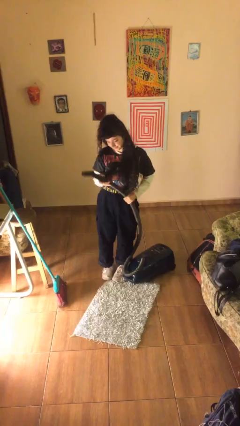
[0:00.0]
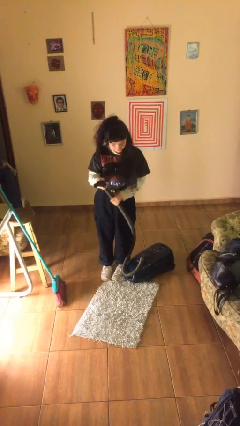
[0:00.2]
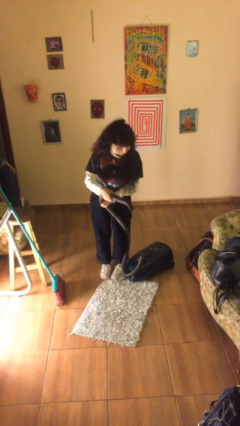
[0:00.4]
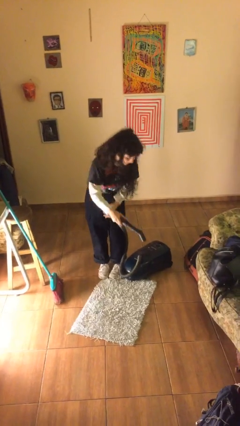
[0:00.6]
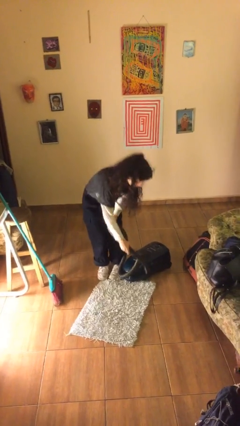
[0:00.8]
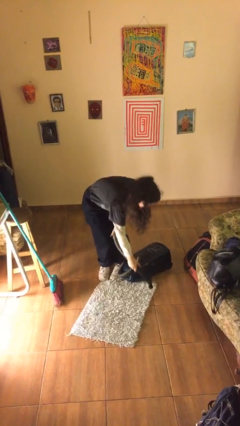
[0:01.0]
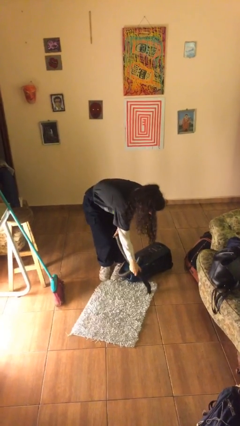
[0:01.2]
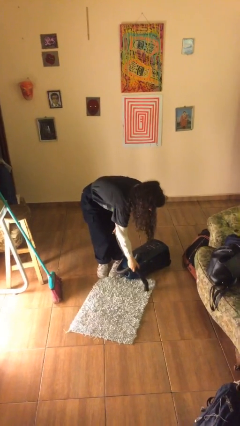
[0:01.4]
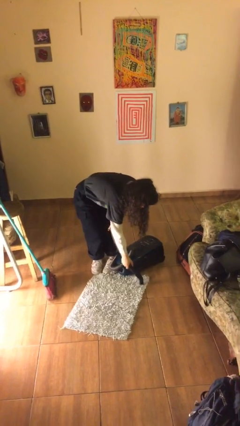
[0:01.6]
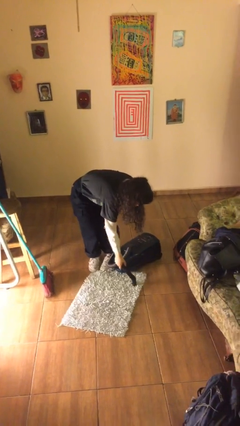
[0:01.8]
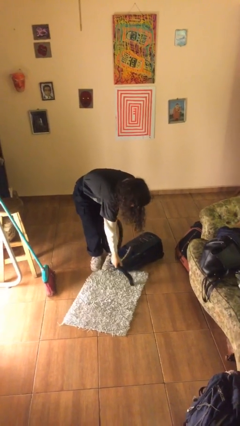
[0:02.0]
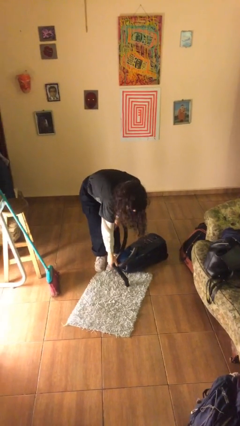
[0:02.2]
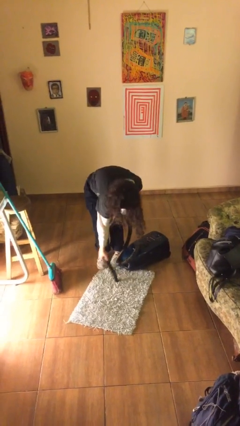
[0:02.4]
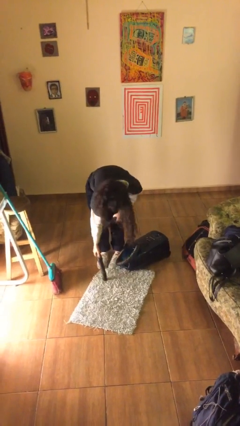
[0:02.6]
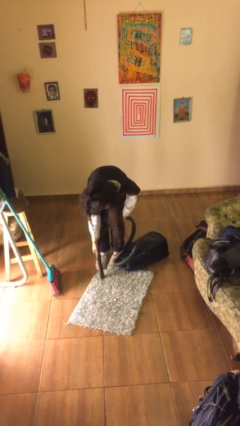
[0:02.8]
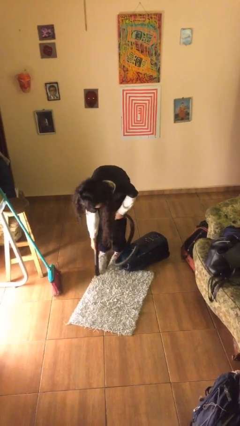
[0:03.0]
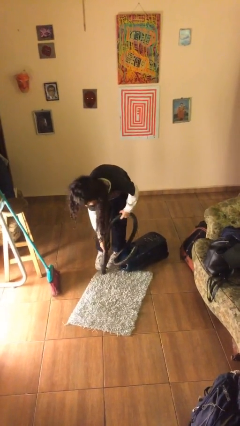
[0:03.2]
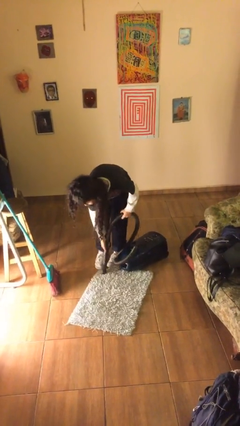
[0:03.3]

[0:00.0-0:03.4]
person vacuums carpet

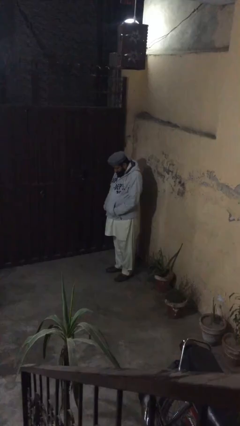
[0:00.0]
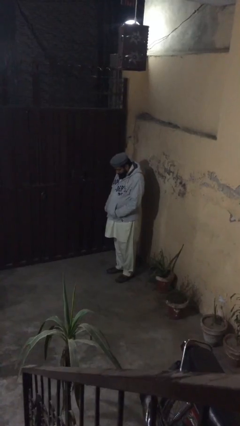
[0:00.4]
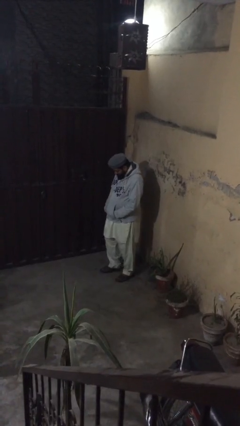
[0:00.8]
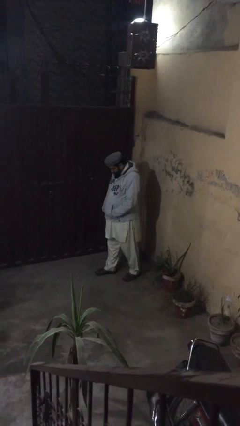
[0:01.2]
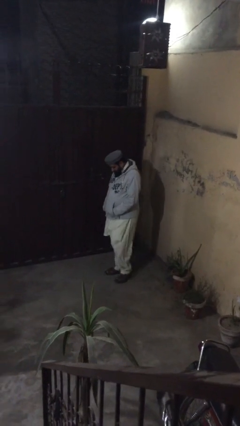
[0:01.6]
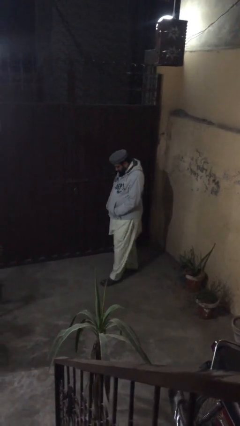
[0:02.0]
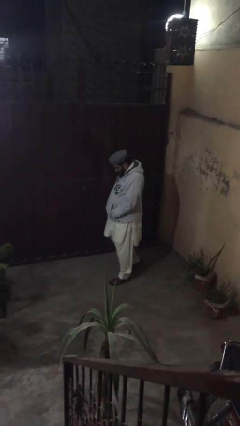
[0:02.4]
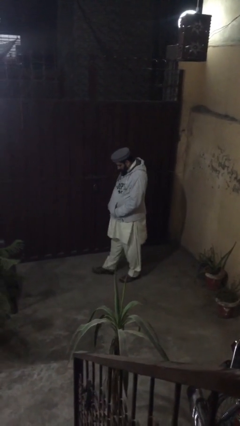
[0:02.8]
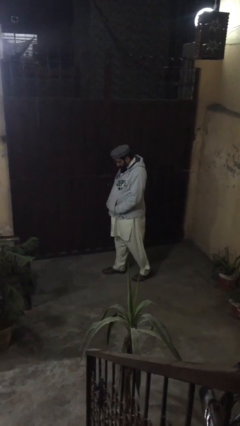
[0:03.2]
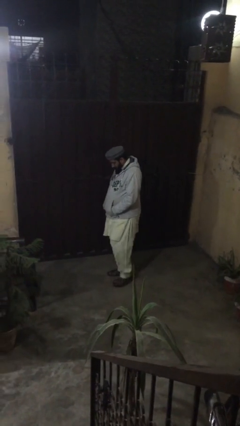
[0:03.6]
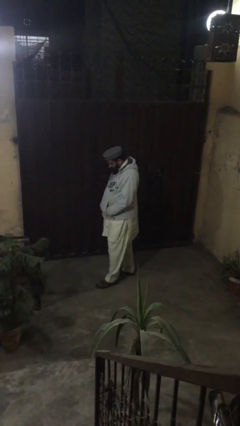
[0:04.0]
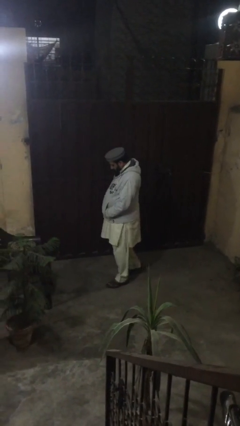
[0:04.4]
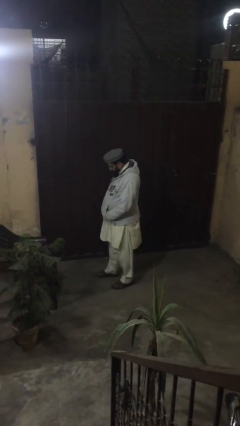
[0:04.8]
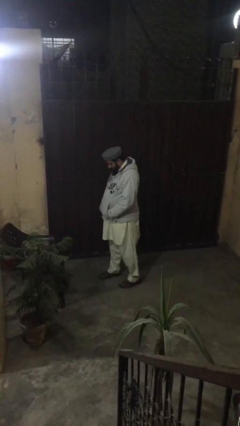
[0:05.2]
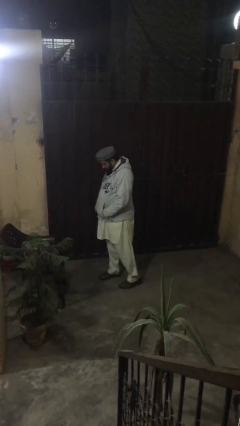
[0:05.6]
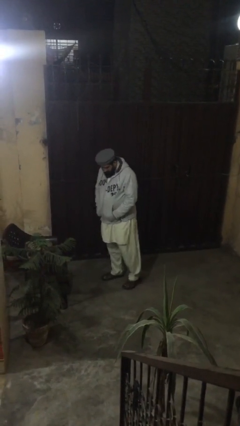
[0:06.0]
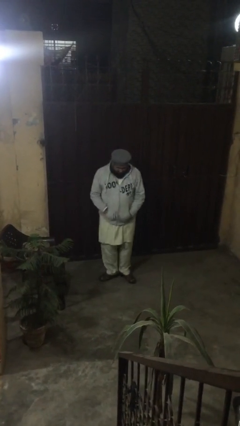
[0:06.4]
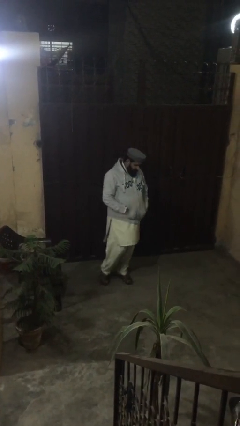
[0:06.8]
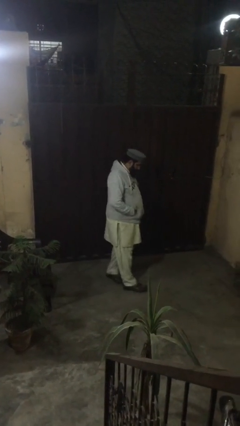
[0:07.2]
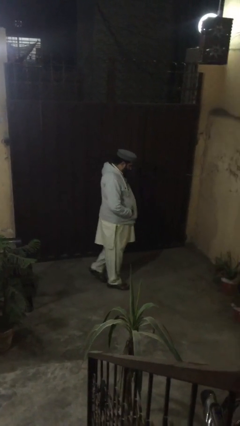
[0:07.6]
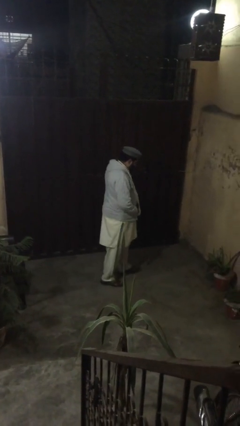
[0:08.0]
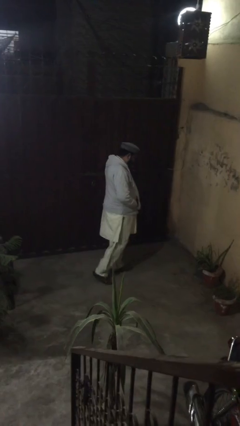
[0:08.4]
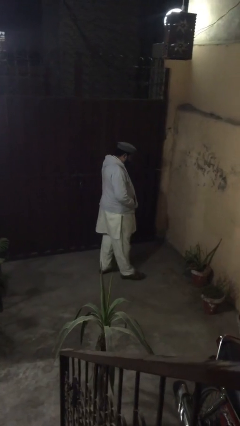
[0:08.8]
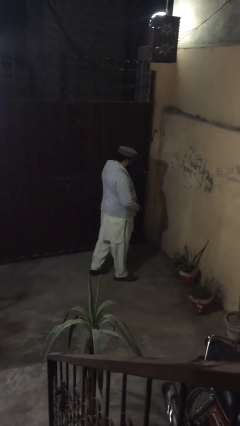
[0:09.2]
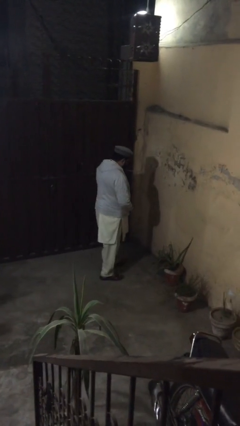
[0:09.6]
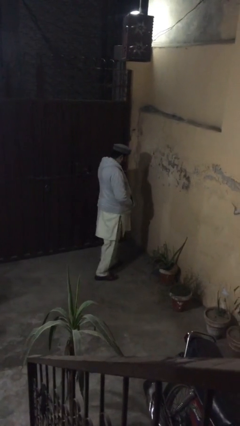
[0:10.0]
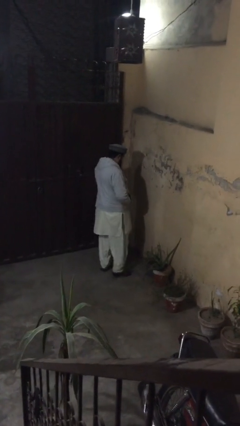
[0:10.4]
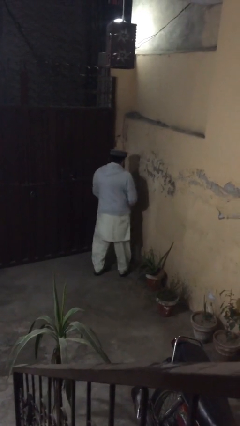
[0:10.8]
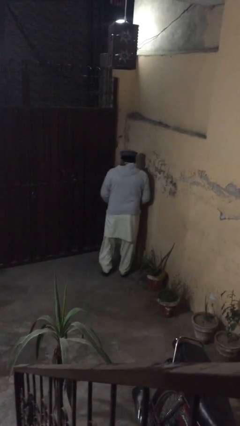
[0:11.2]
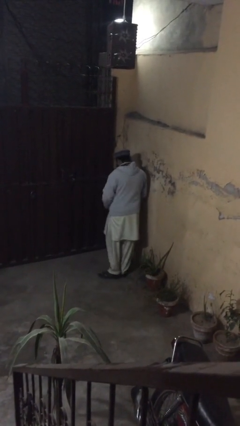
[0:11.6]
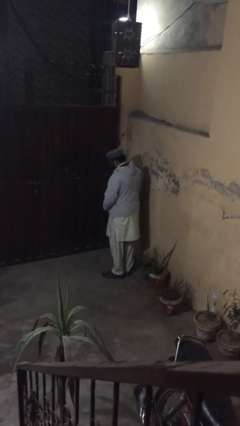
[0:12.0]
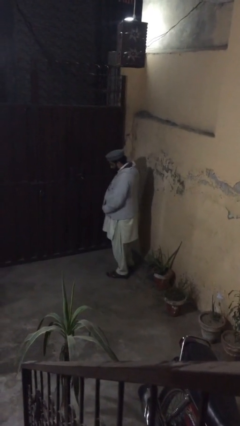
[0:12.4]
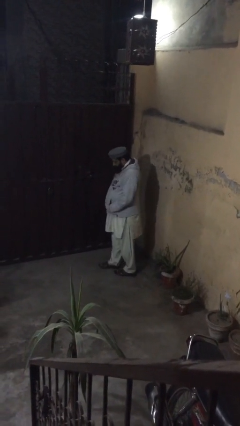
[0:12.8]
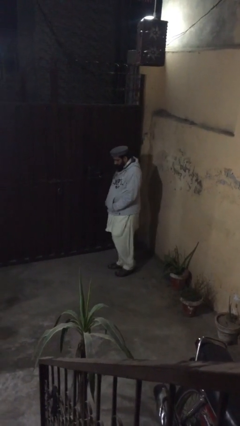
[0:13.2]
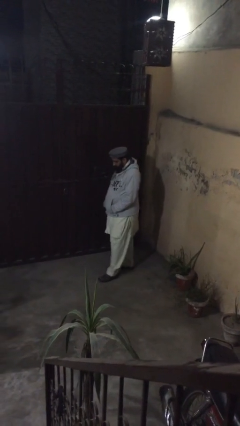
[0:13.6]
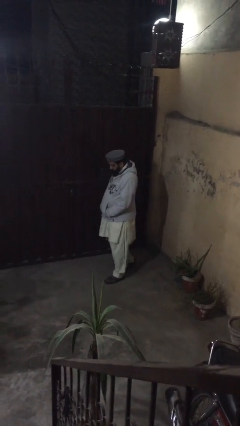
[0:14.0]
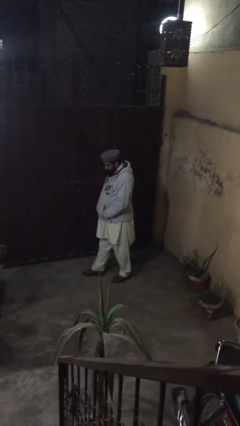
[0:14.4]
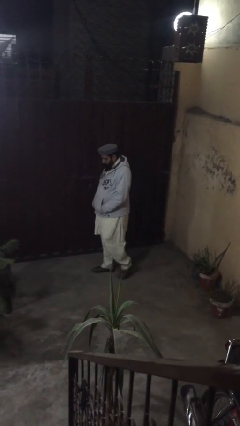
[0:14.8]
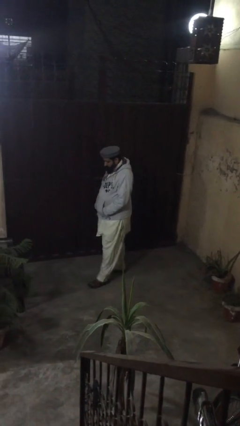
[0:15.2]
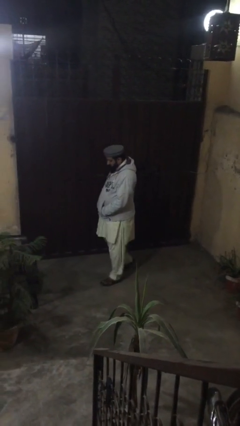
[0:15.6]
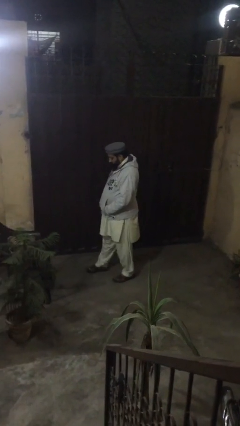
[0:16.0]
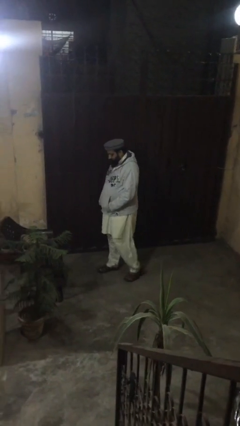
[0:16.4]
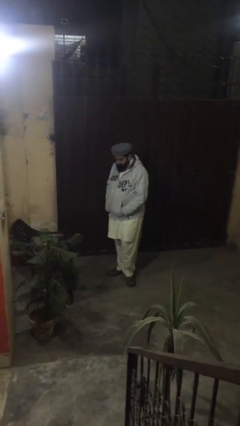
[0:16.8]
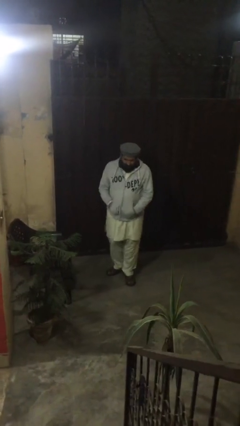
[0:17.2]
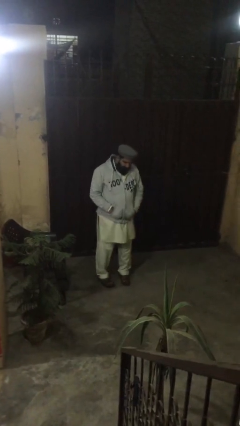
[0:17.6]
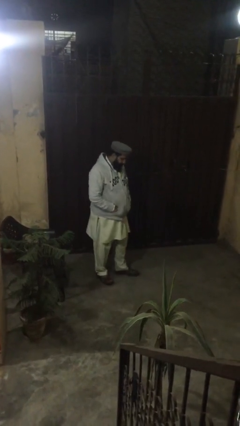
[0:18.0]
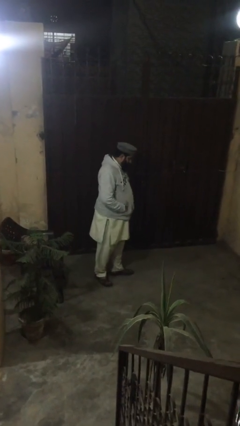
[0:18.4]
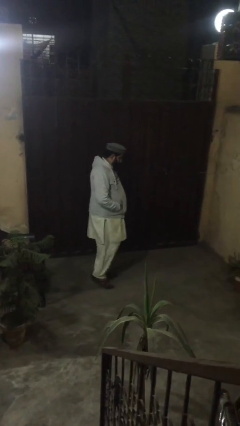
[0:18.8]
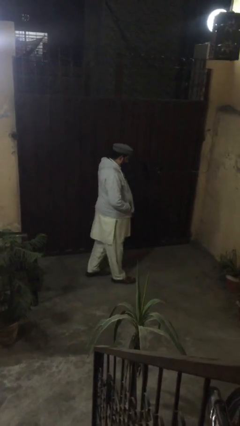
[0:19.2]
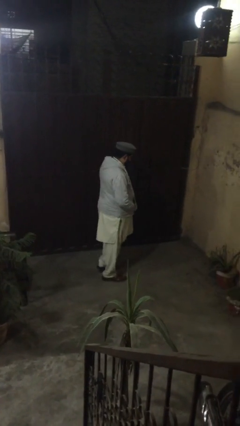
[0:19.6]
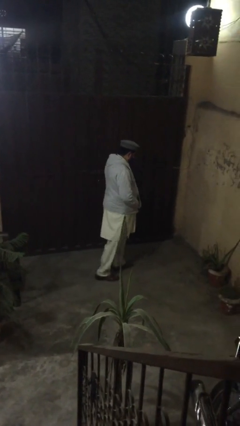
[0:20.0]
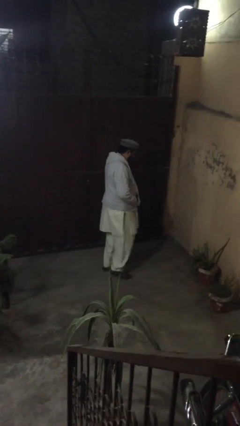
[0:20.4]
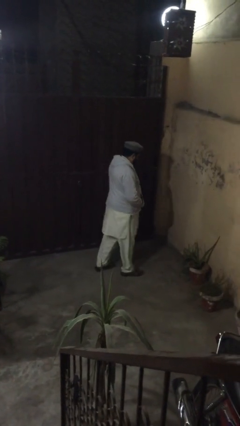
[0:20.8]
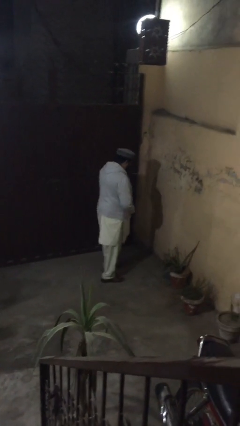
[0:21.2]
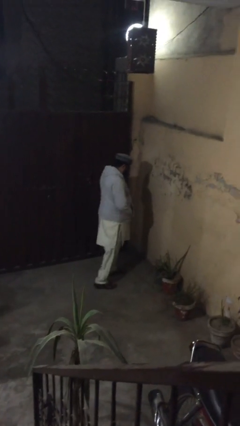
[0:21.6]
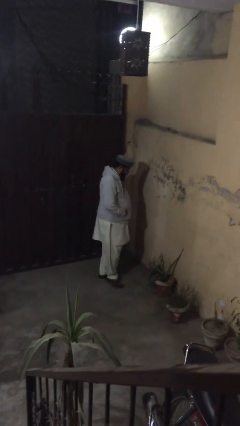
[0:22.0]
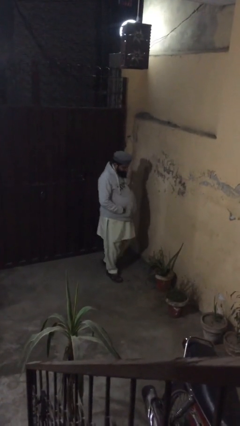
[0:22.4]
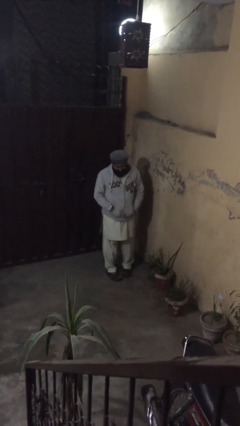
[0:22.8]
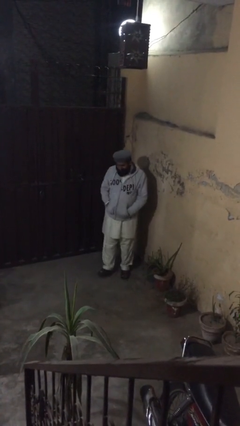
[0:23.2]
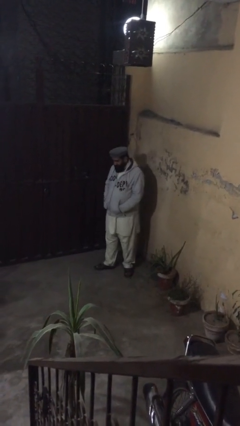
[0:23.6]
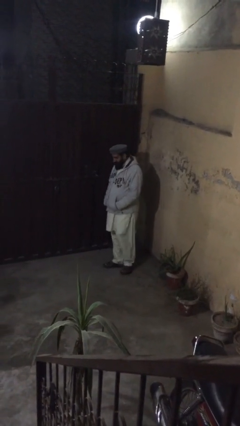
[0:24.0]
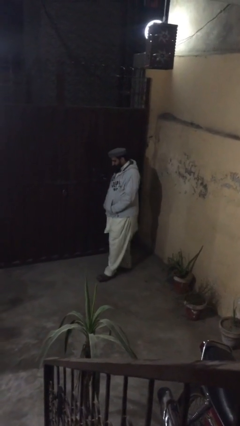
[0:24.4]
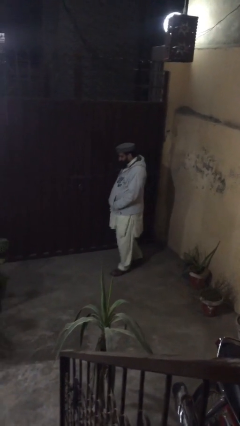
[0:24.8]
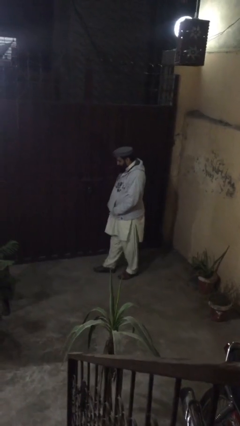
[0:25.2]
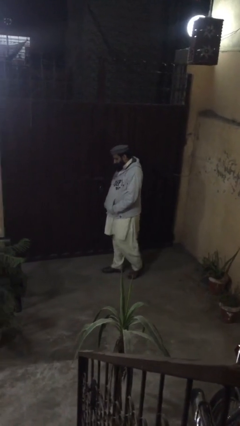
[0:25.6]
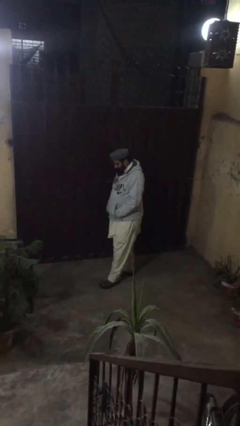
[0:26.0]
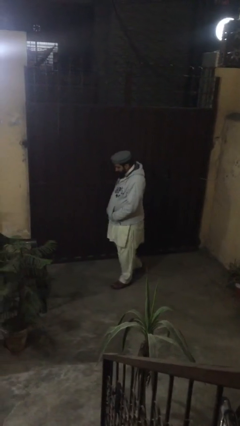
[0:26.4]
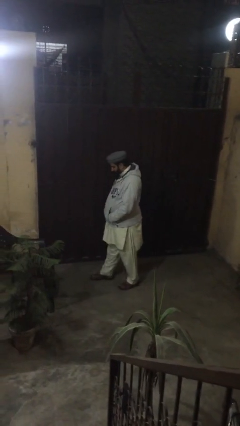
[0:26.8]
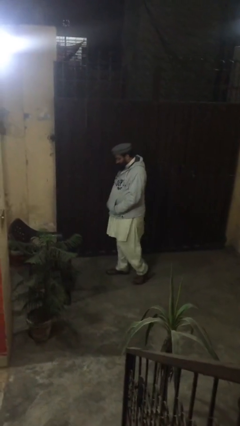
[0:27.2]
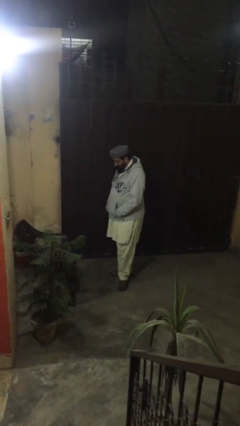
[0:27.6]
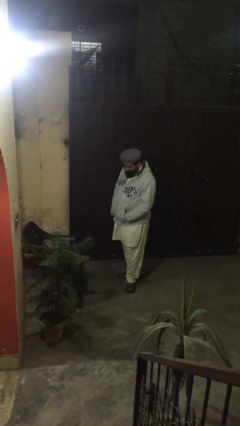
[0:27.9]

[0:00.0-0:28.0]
person walks

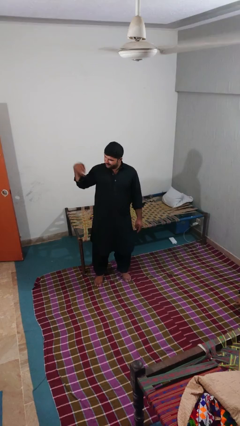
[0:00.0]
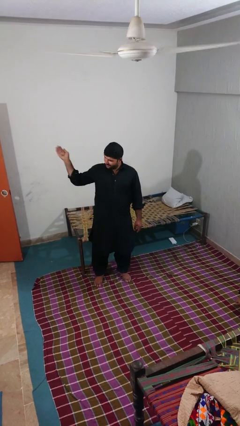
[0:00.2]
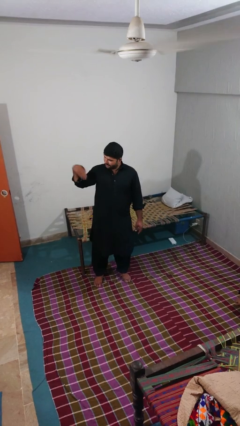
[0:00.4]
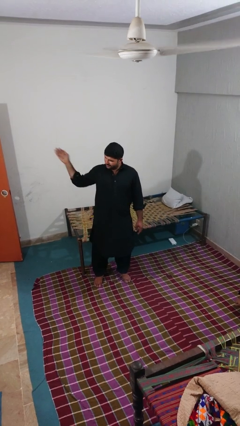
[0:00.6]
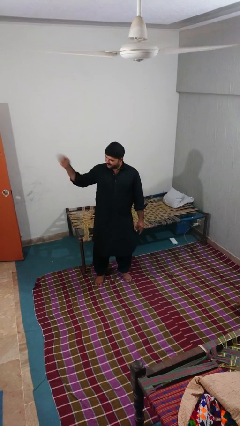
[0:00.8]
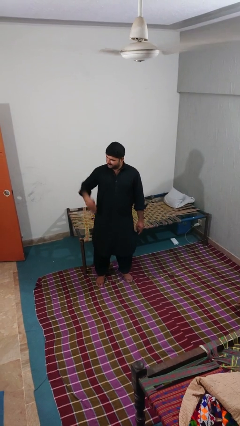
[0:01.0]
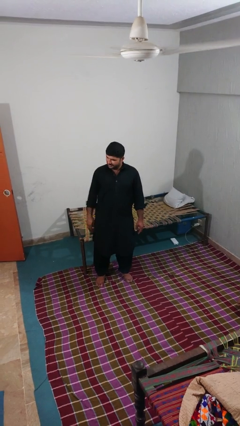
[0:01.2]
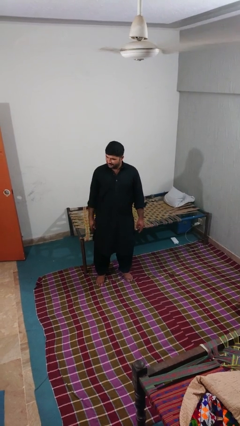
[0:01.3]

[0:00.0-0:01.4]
person gestures come here
